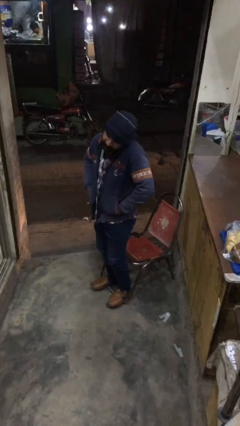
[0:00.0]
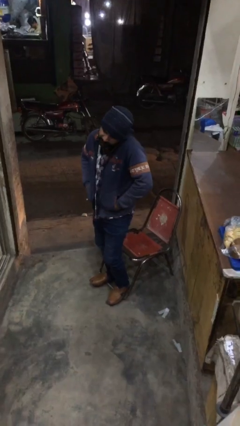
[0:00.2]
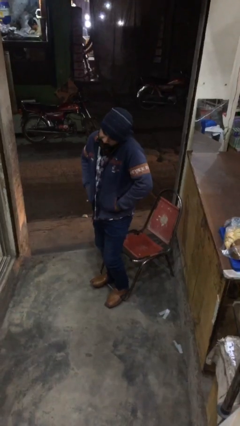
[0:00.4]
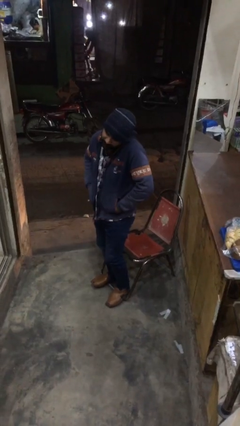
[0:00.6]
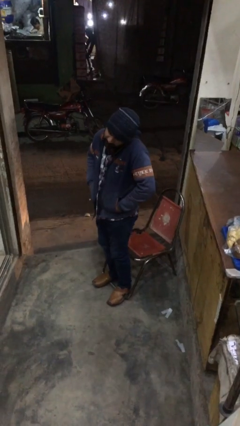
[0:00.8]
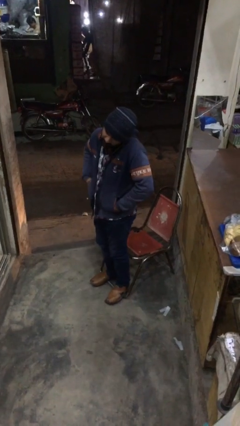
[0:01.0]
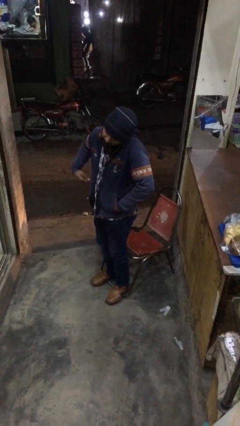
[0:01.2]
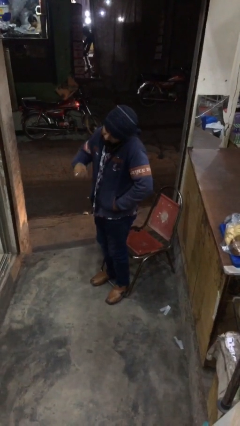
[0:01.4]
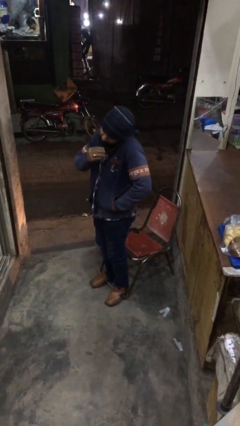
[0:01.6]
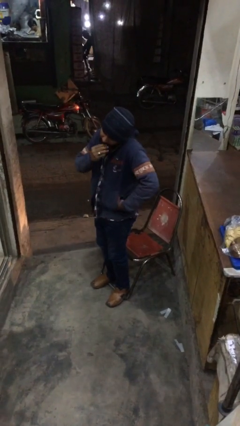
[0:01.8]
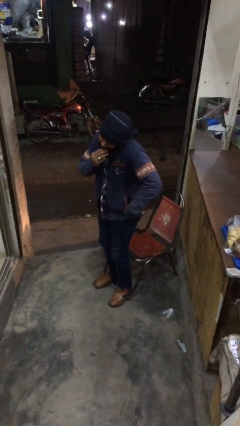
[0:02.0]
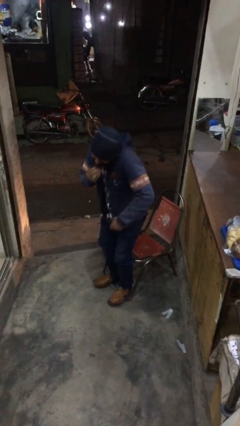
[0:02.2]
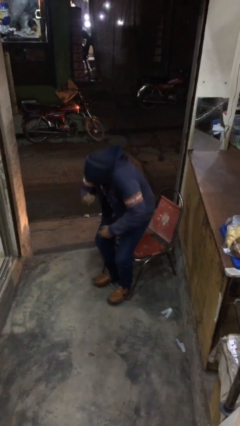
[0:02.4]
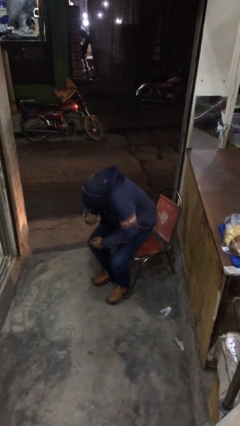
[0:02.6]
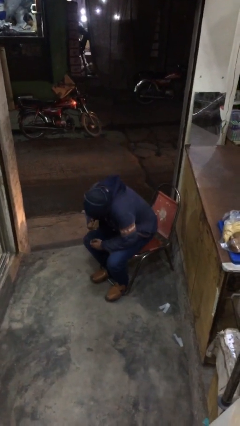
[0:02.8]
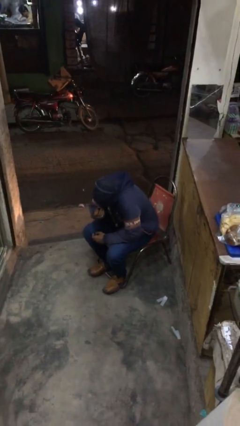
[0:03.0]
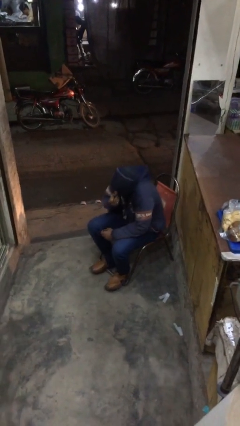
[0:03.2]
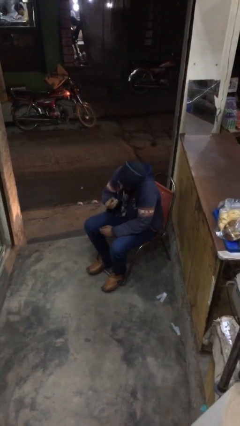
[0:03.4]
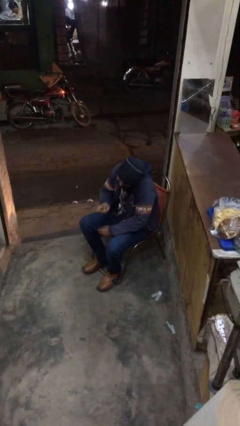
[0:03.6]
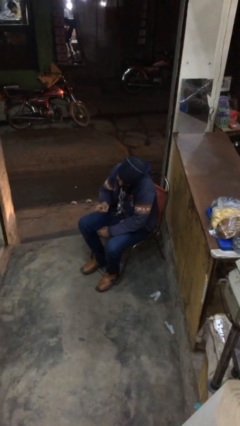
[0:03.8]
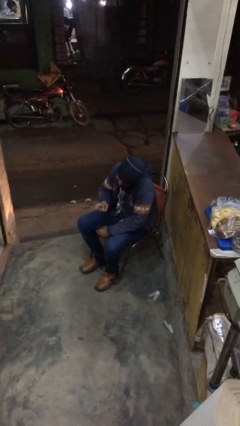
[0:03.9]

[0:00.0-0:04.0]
person sits down

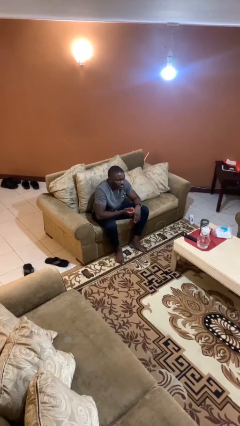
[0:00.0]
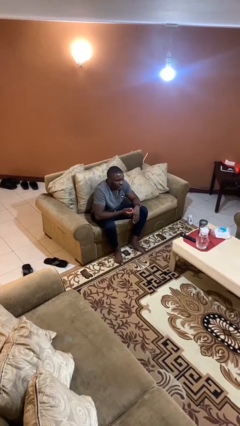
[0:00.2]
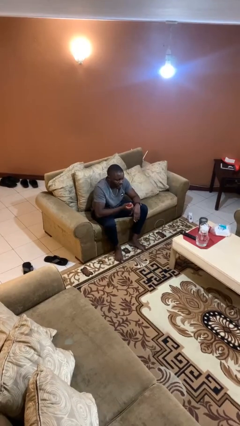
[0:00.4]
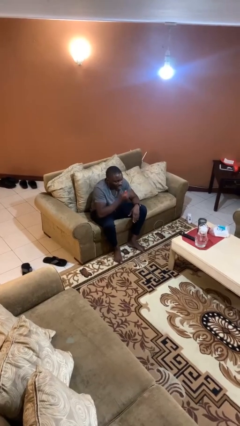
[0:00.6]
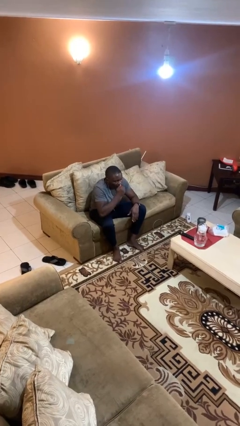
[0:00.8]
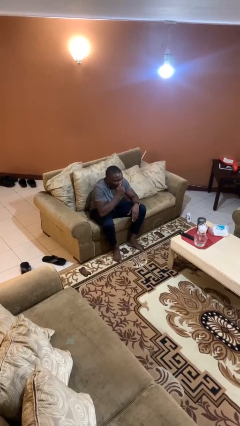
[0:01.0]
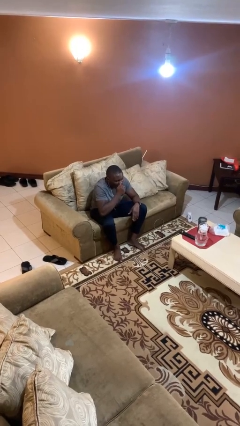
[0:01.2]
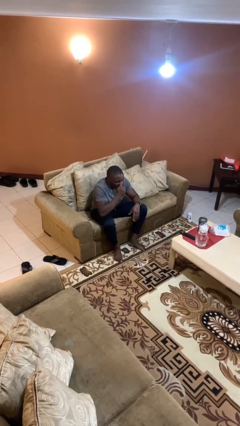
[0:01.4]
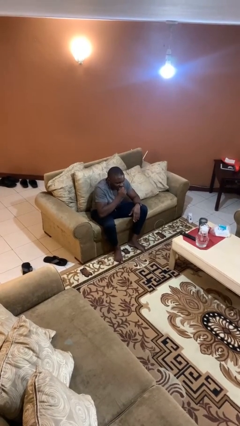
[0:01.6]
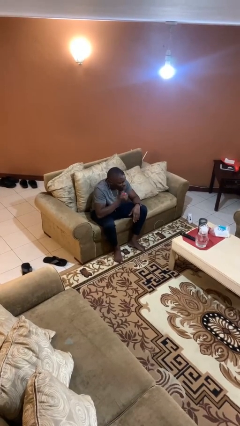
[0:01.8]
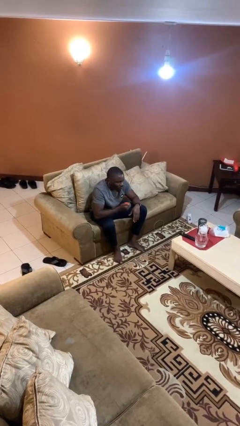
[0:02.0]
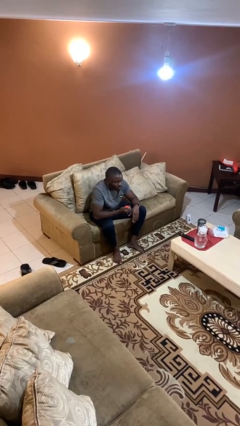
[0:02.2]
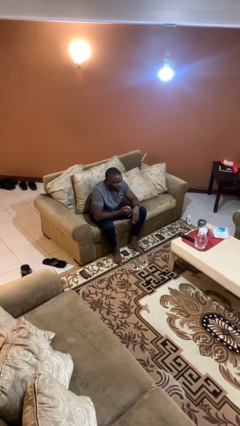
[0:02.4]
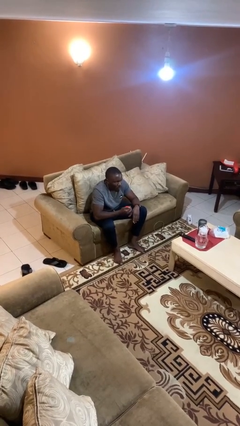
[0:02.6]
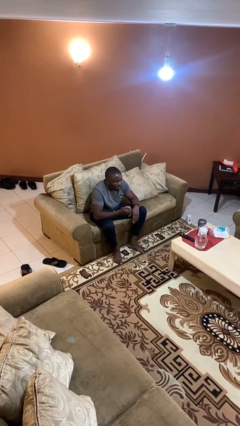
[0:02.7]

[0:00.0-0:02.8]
person eats apple

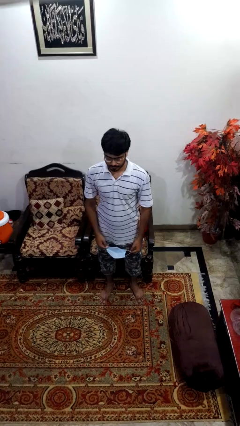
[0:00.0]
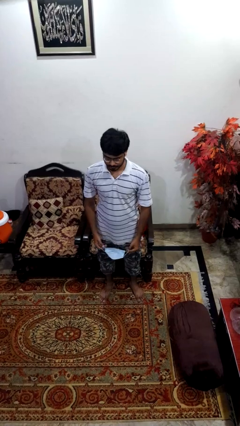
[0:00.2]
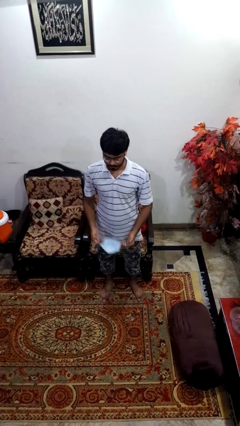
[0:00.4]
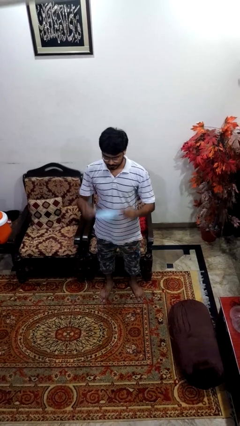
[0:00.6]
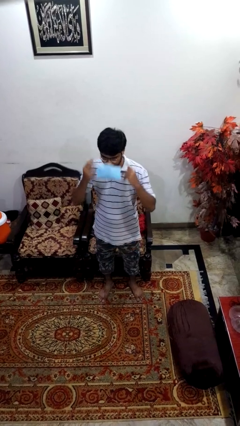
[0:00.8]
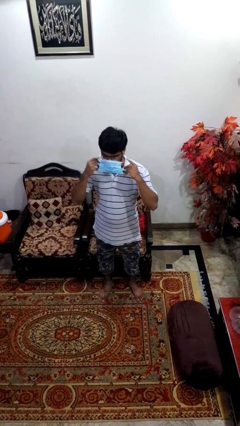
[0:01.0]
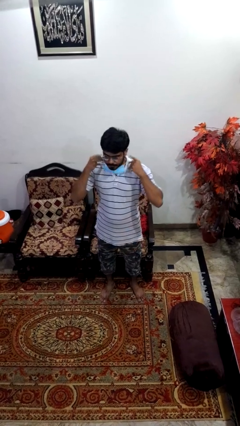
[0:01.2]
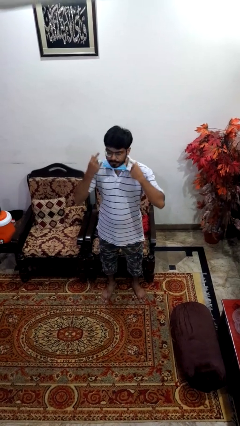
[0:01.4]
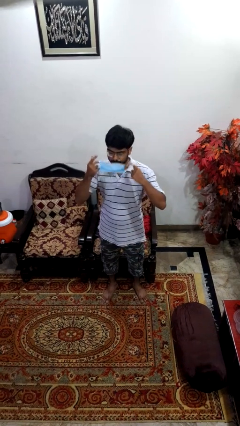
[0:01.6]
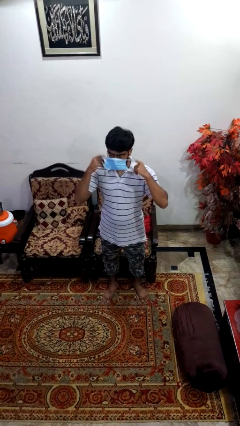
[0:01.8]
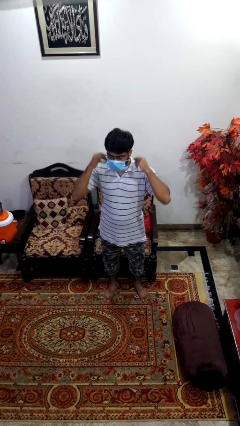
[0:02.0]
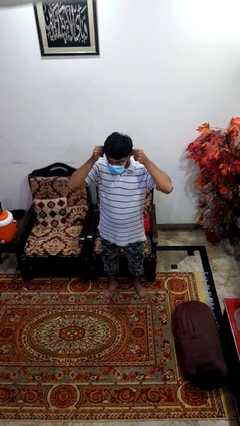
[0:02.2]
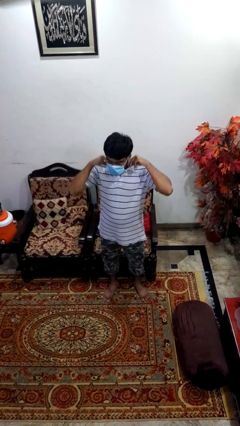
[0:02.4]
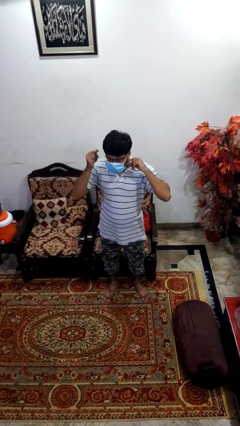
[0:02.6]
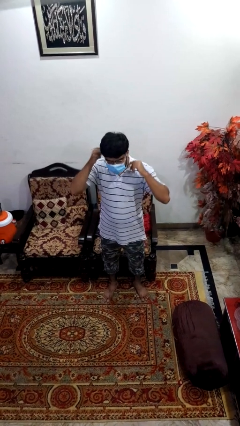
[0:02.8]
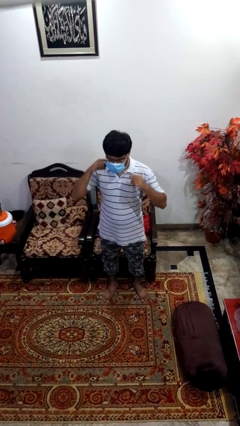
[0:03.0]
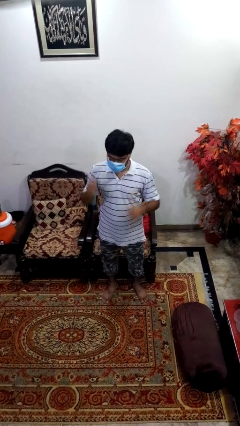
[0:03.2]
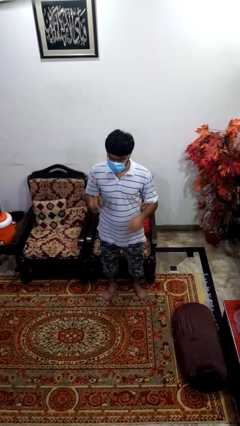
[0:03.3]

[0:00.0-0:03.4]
person puts on facemask

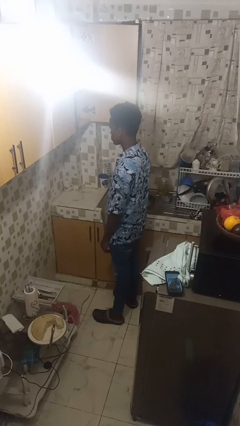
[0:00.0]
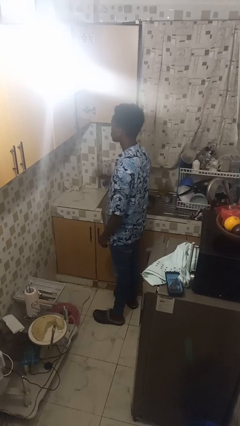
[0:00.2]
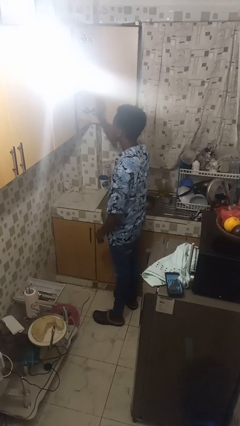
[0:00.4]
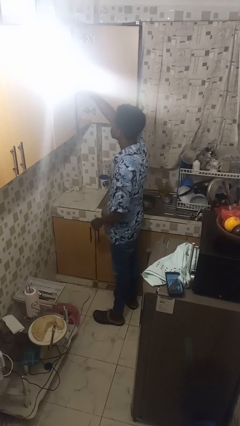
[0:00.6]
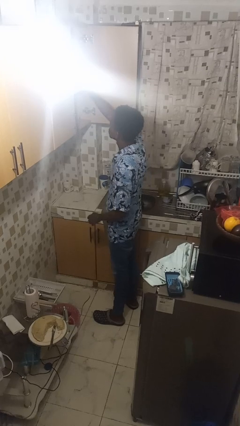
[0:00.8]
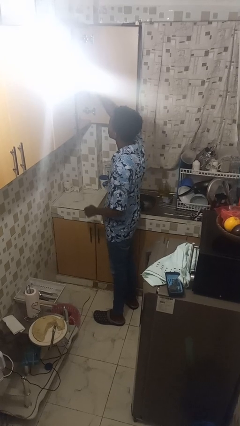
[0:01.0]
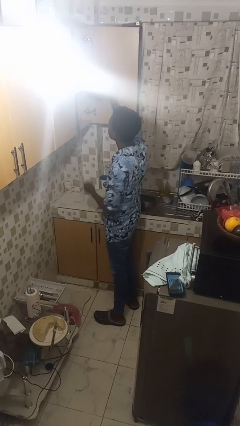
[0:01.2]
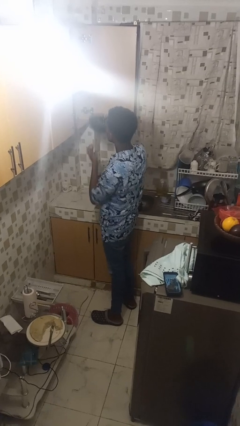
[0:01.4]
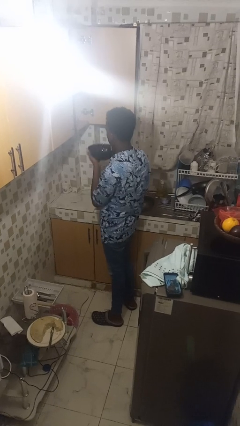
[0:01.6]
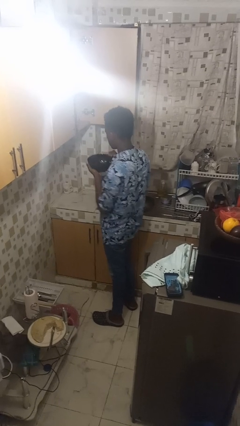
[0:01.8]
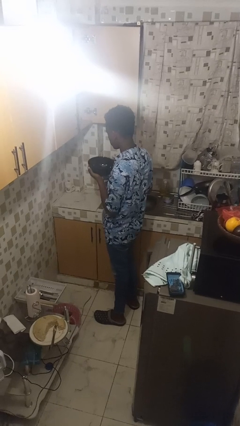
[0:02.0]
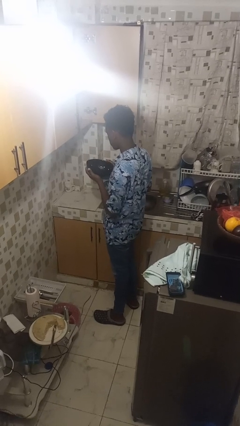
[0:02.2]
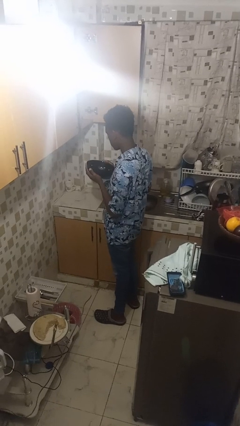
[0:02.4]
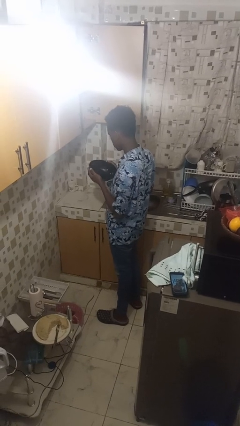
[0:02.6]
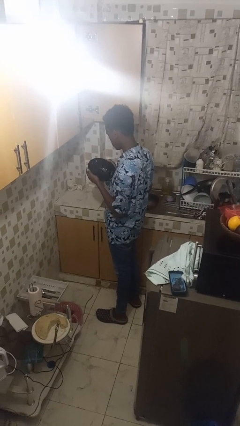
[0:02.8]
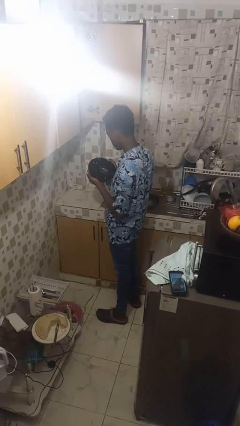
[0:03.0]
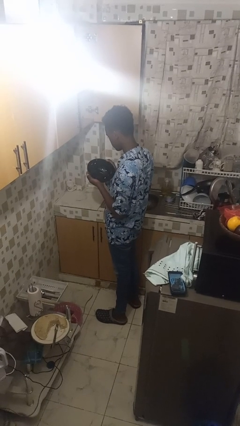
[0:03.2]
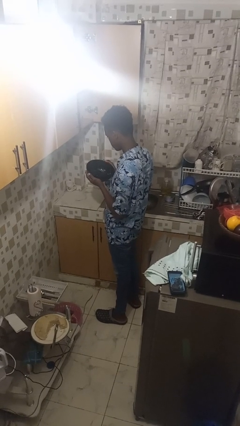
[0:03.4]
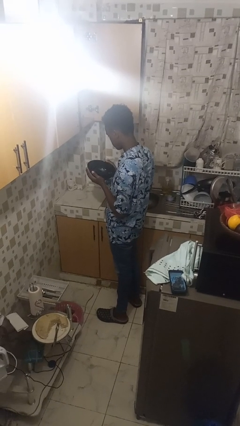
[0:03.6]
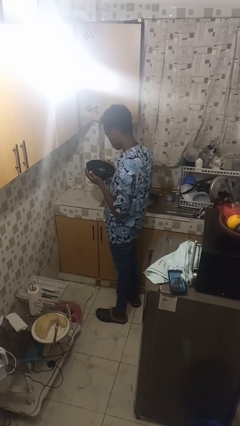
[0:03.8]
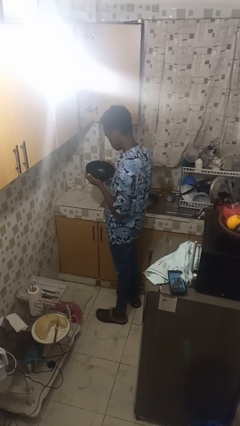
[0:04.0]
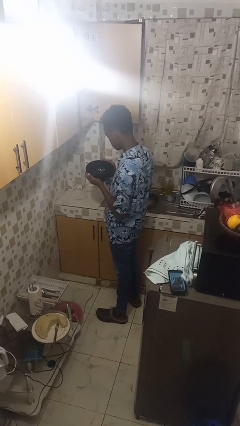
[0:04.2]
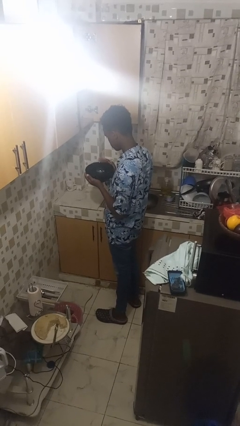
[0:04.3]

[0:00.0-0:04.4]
person picks up object from cabinet

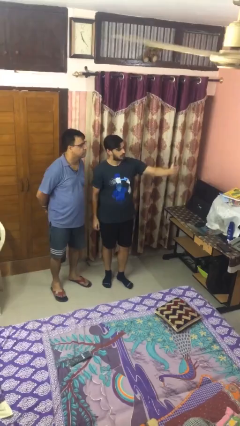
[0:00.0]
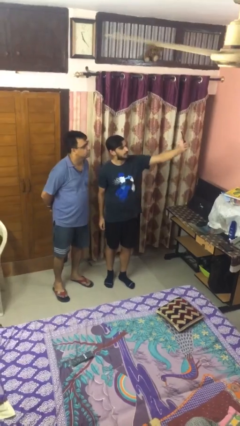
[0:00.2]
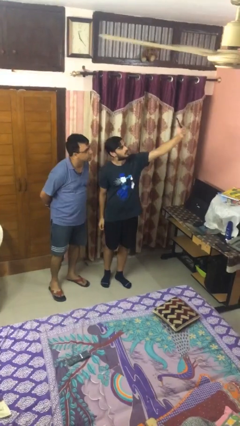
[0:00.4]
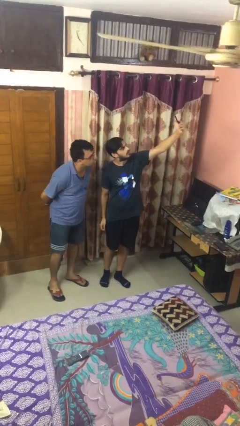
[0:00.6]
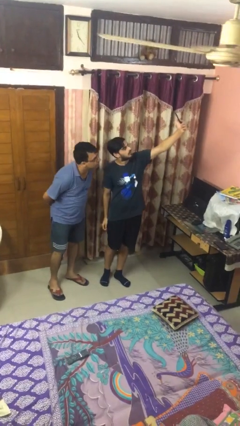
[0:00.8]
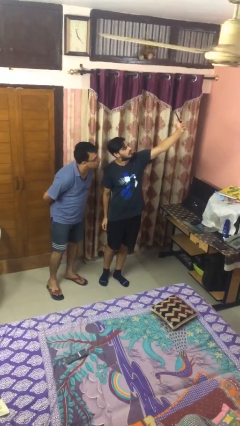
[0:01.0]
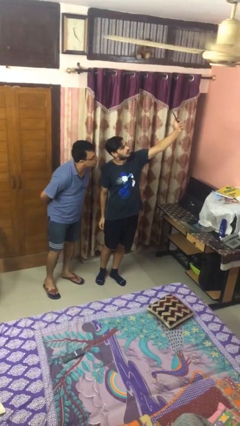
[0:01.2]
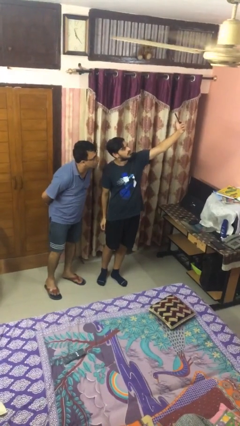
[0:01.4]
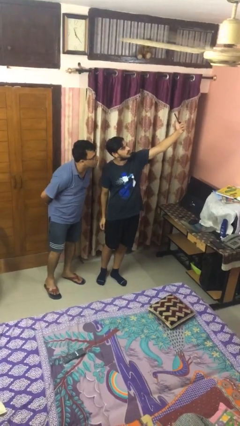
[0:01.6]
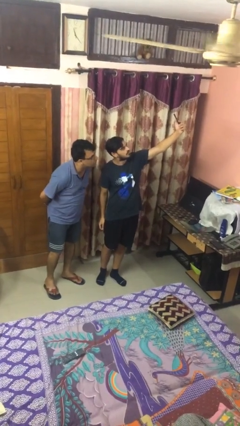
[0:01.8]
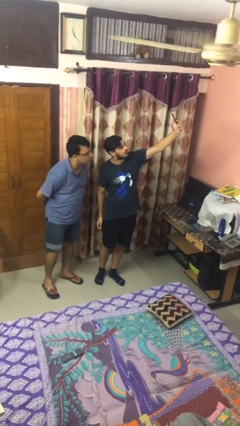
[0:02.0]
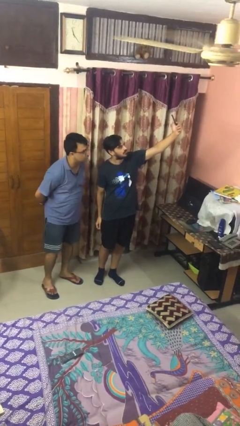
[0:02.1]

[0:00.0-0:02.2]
person takes selfie with person

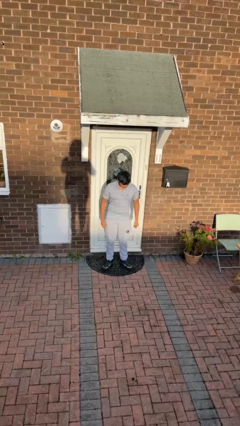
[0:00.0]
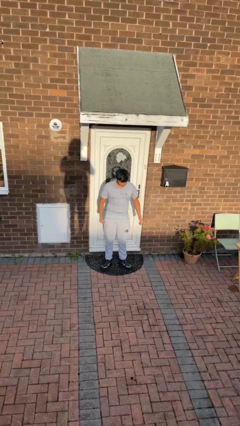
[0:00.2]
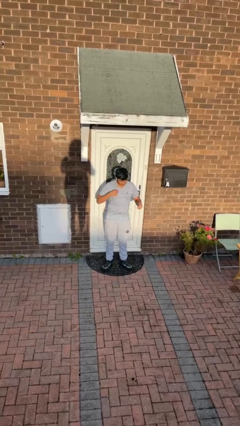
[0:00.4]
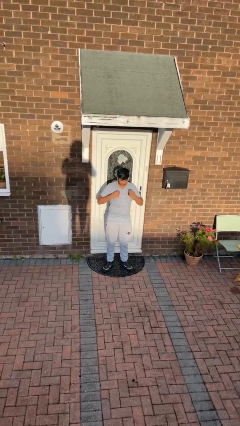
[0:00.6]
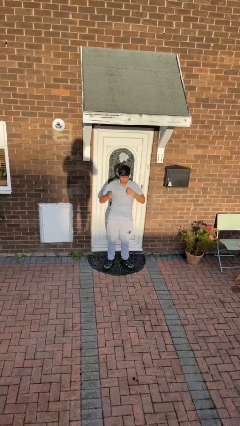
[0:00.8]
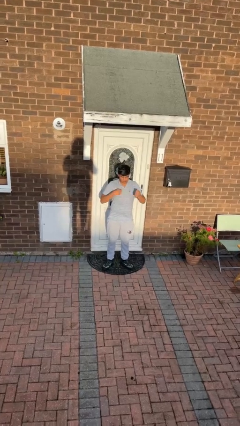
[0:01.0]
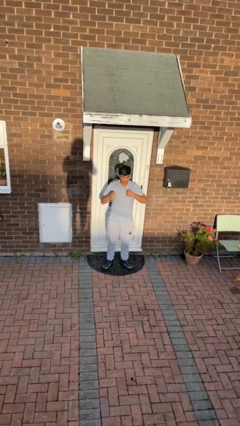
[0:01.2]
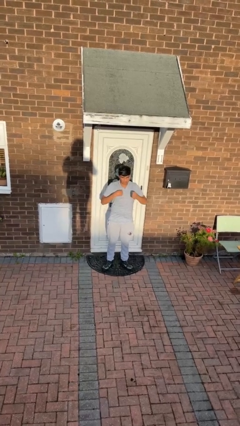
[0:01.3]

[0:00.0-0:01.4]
person drums on chest
